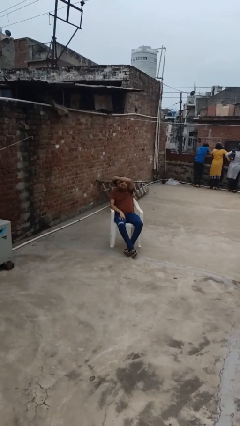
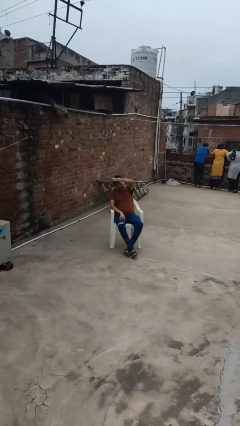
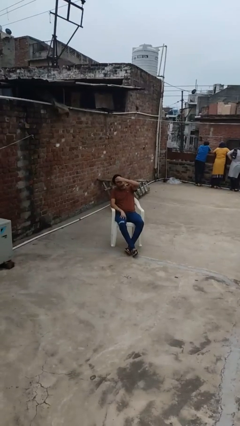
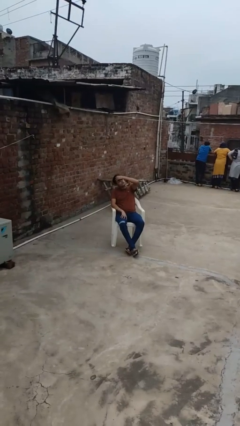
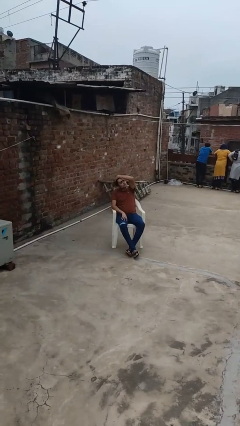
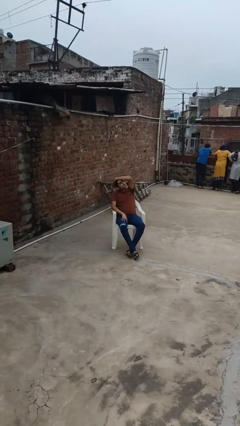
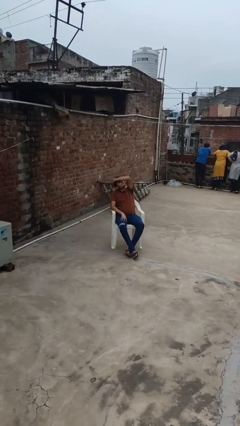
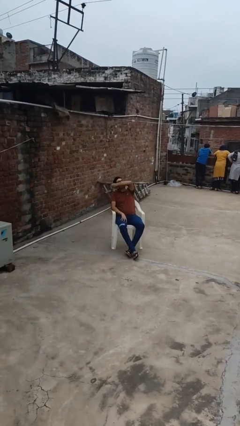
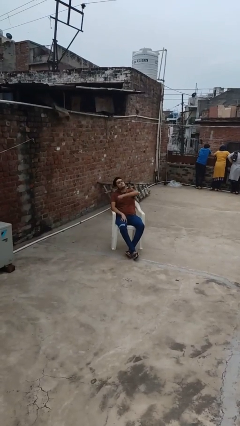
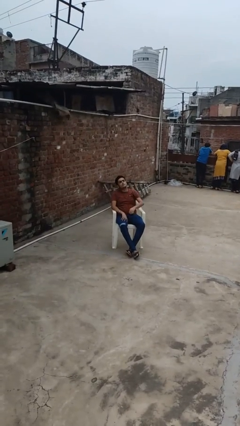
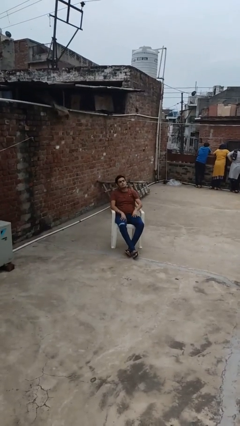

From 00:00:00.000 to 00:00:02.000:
person strokes hair

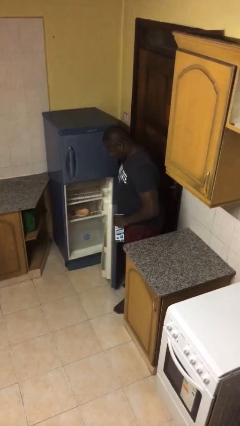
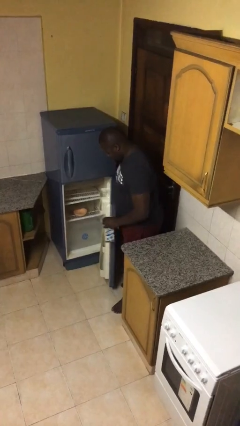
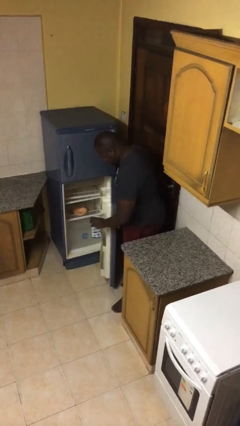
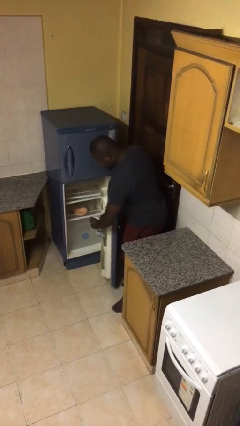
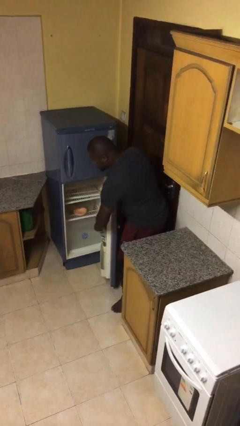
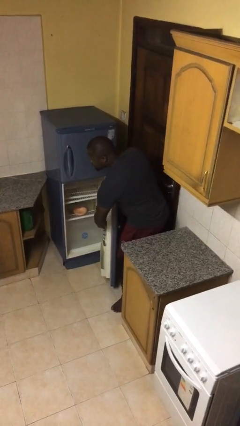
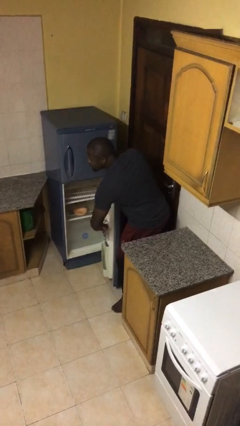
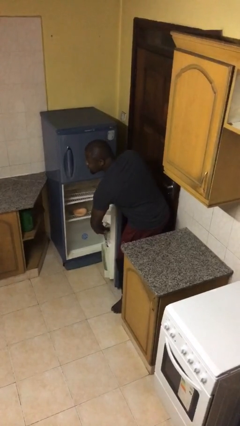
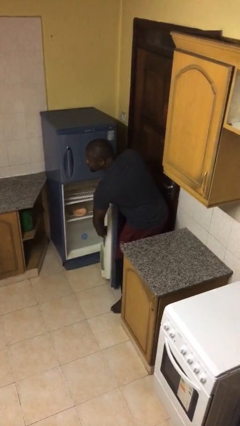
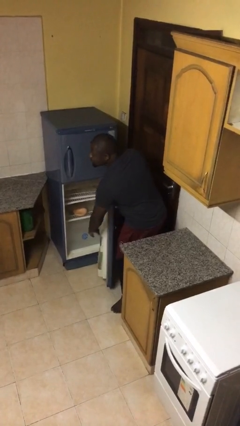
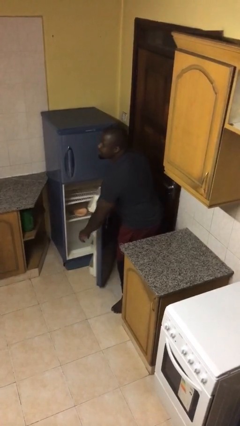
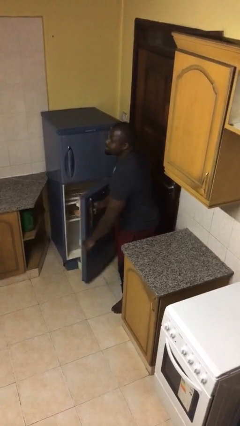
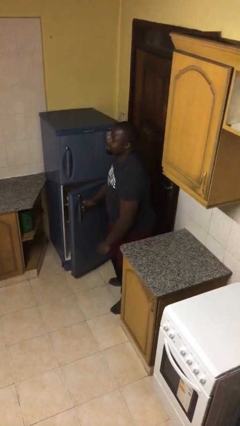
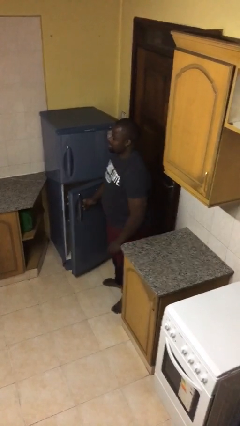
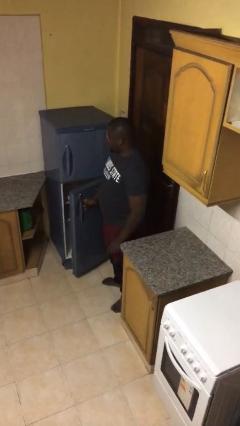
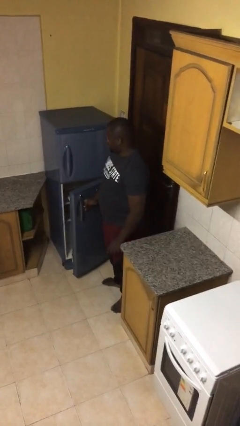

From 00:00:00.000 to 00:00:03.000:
person puts object into refrigerator

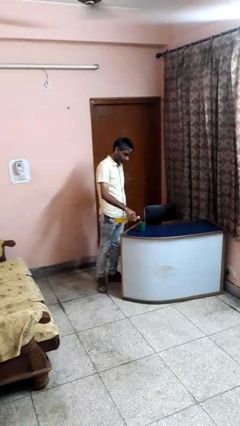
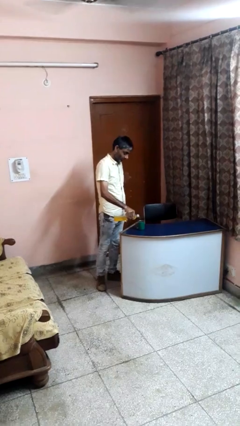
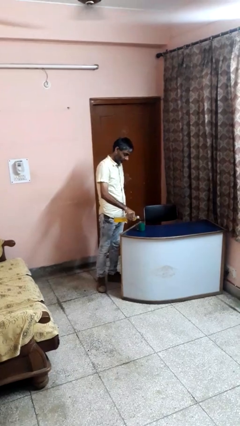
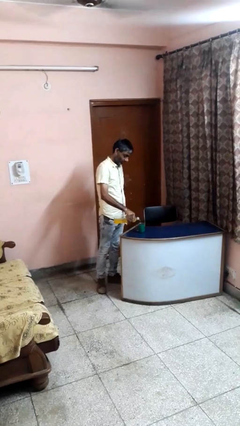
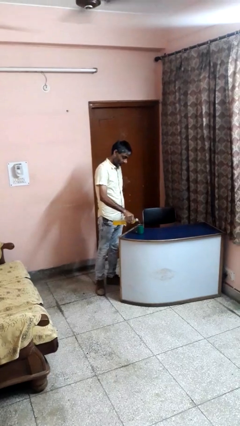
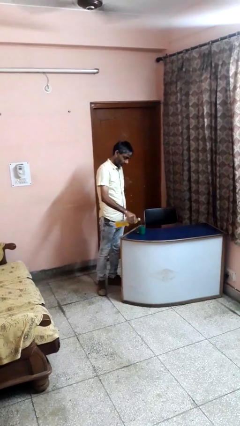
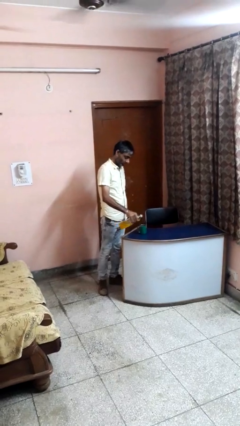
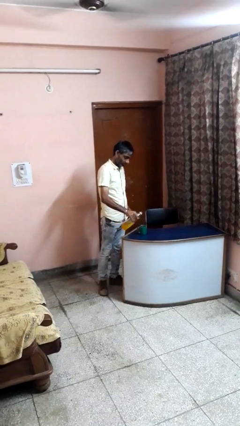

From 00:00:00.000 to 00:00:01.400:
person pours liquid into cup

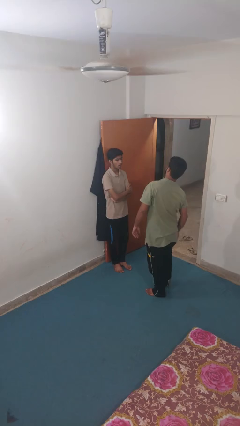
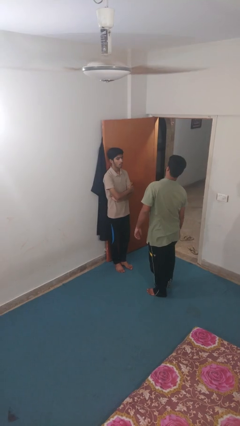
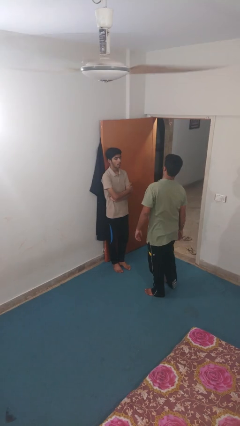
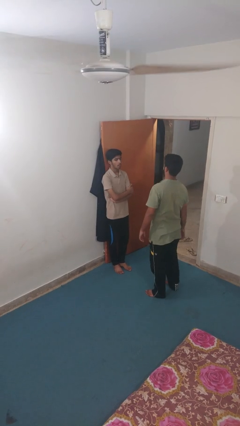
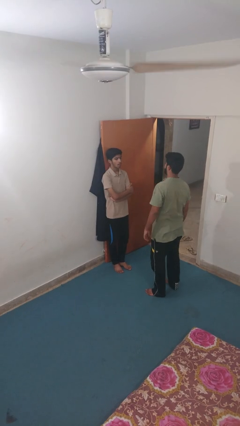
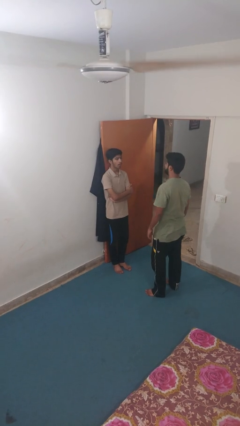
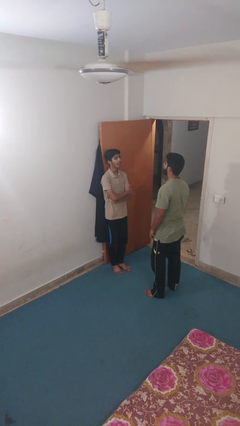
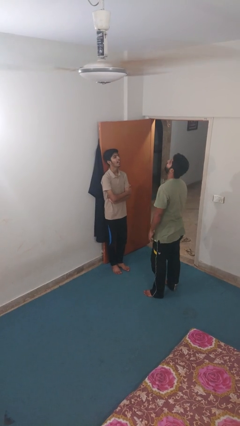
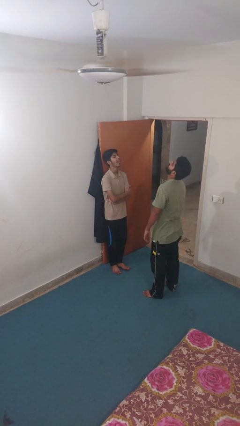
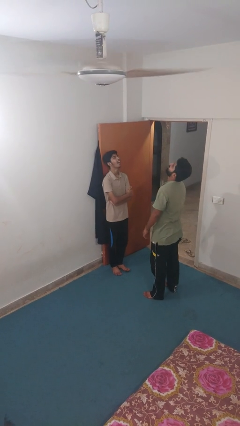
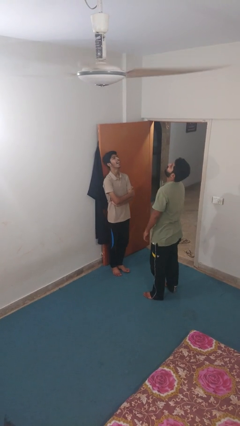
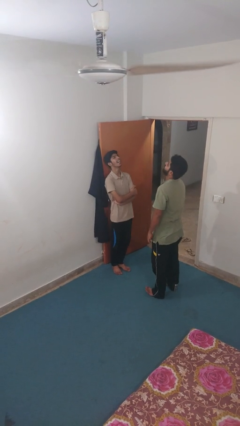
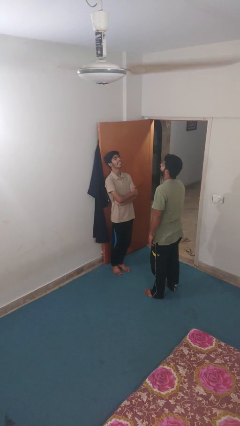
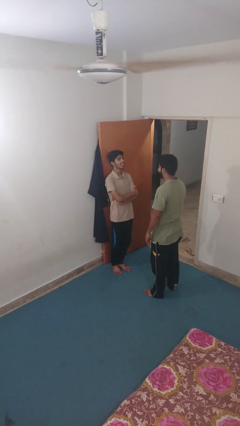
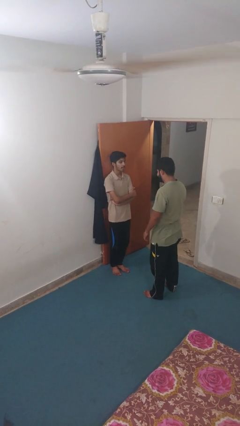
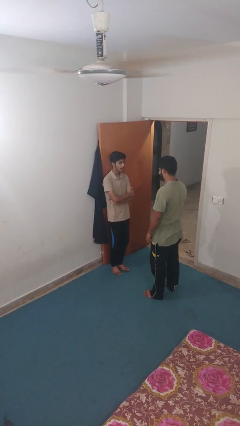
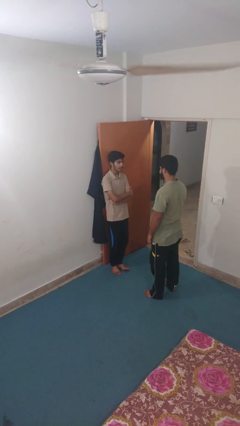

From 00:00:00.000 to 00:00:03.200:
person laughs with person

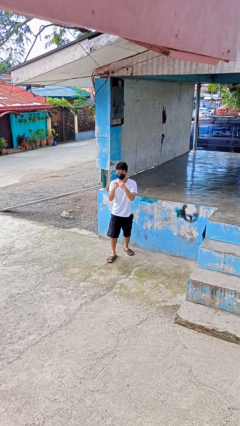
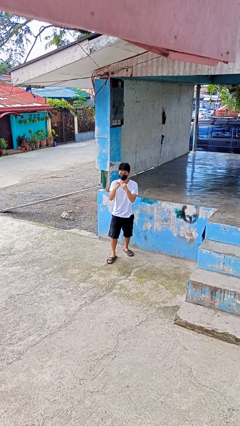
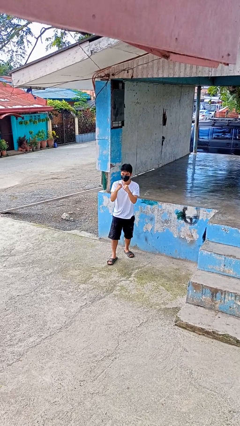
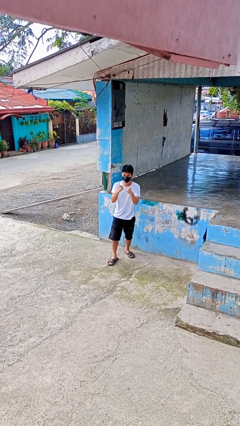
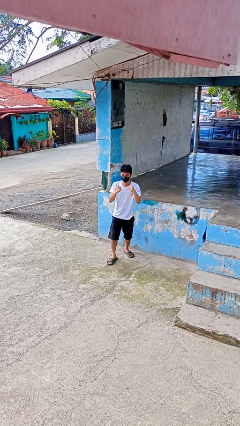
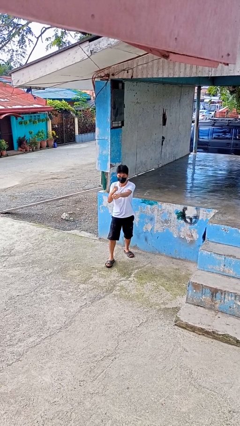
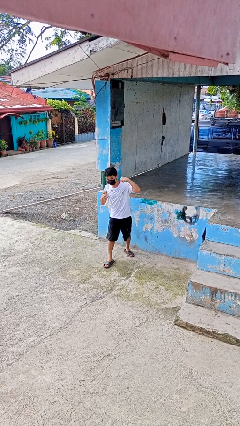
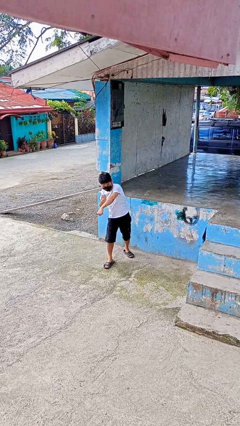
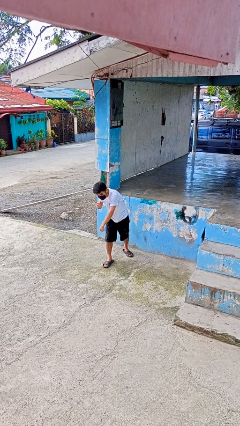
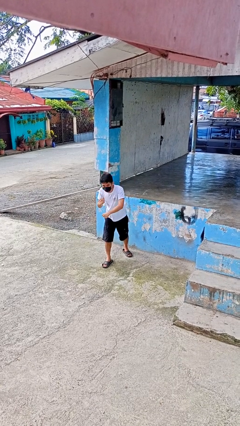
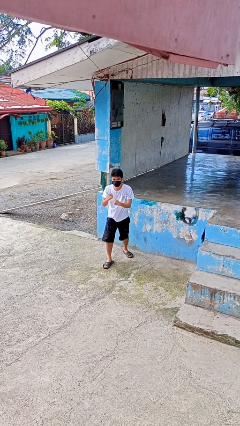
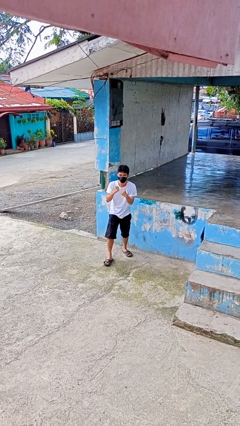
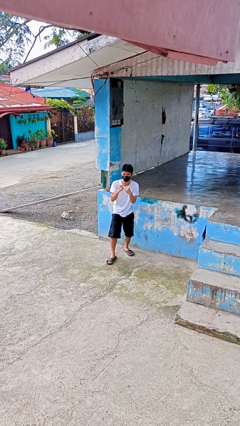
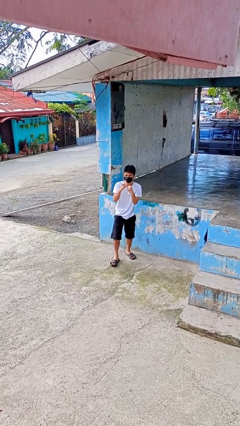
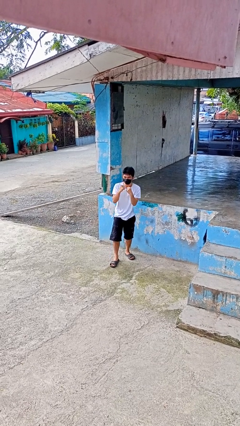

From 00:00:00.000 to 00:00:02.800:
person punches

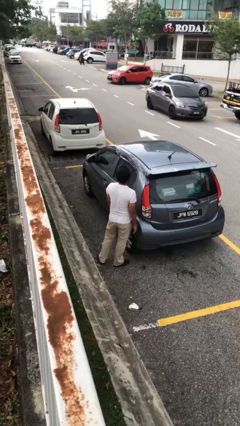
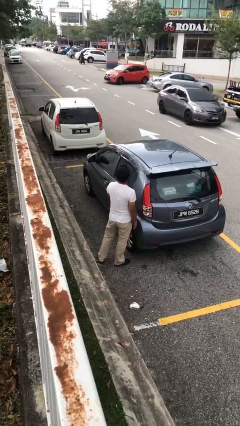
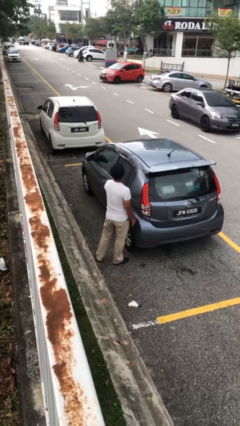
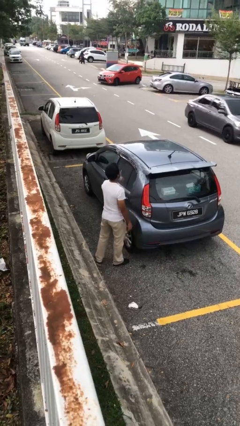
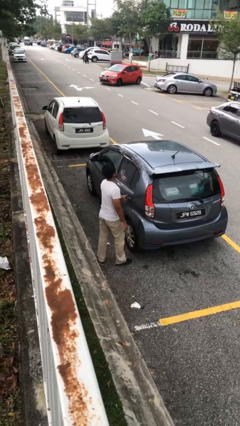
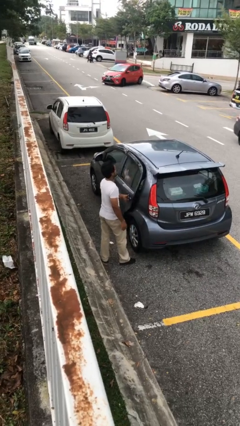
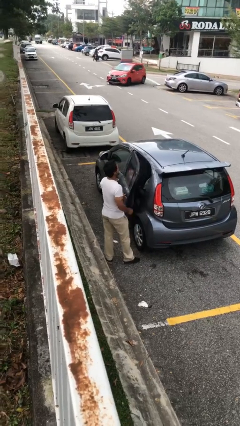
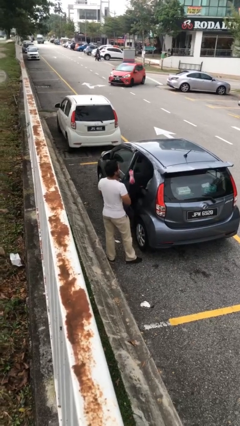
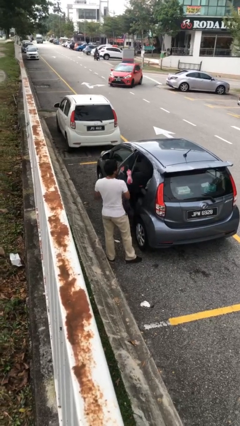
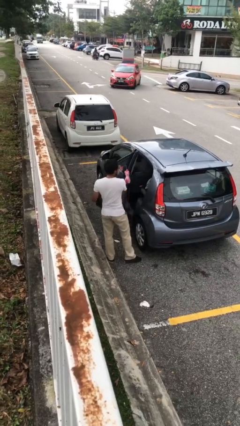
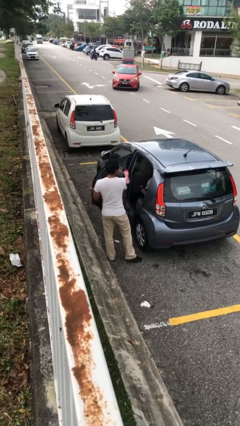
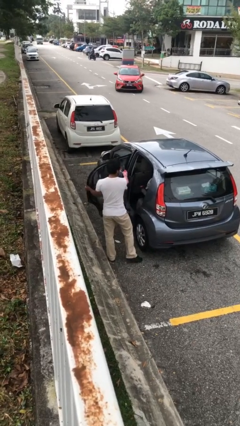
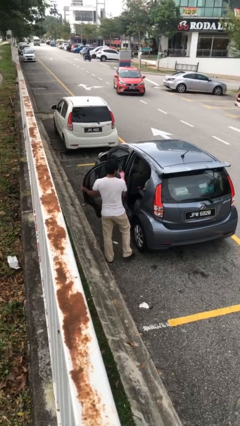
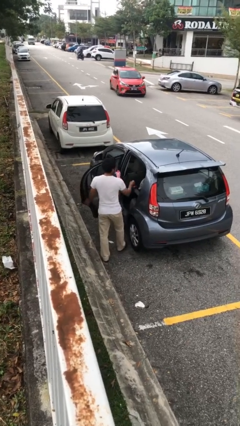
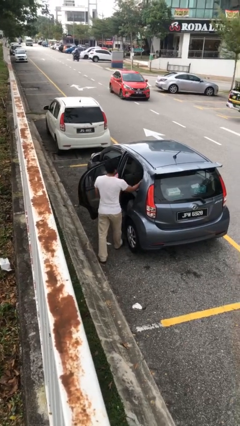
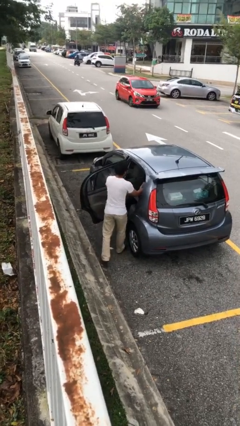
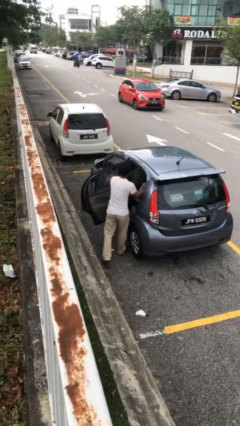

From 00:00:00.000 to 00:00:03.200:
person opens car door

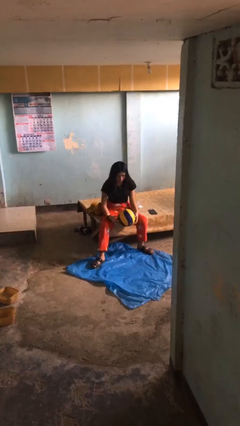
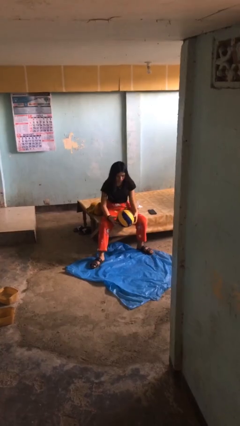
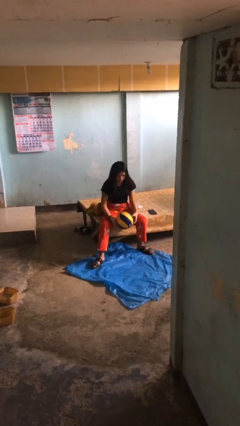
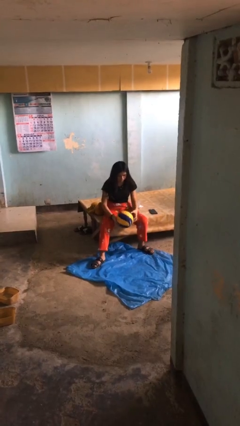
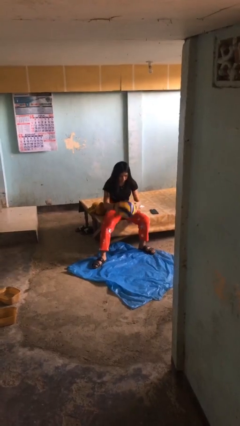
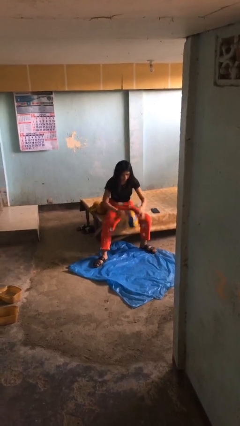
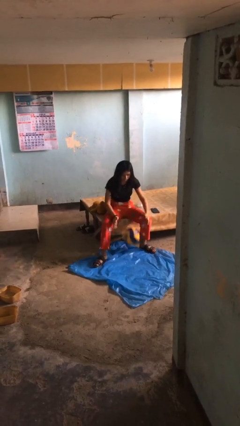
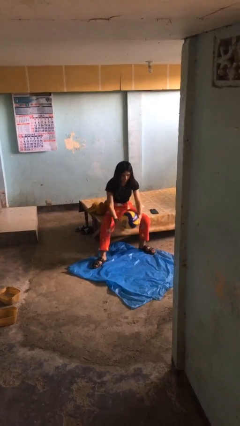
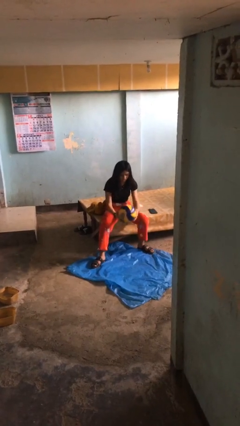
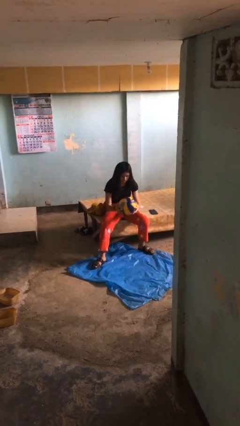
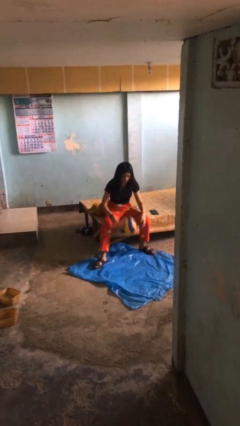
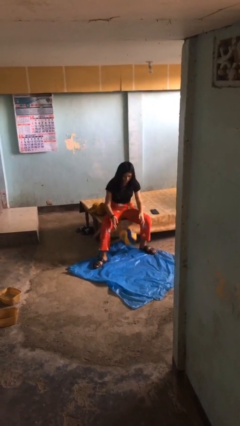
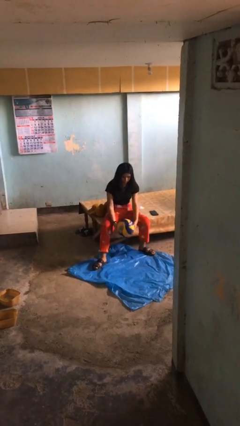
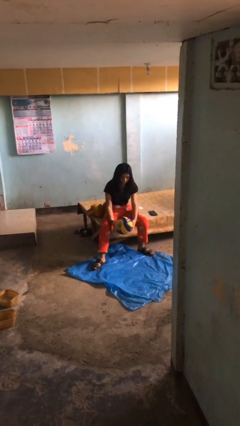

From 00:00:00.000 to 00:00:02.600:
person bounces ball on floor
